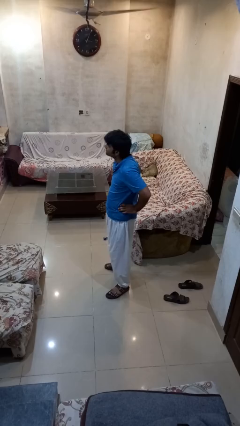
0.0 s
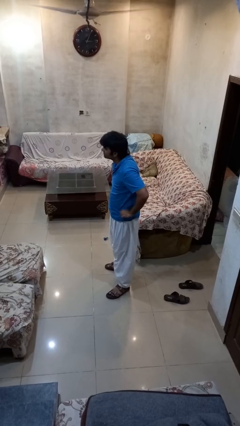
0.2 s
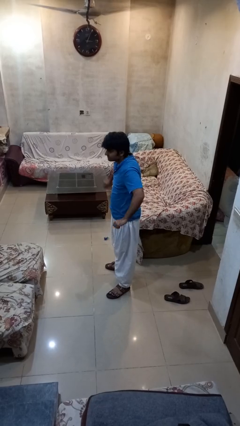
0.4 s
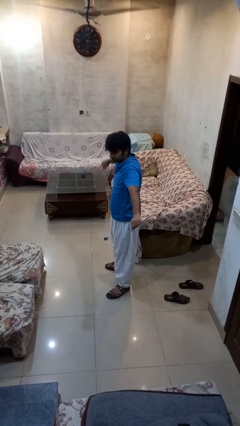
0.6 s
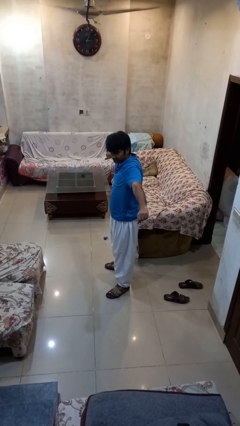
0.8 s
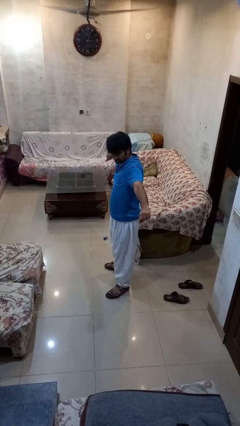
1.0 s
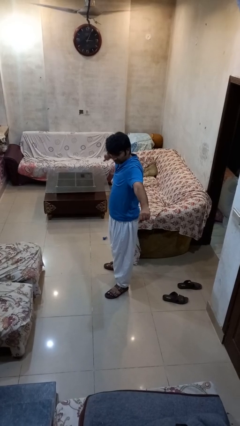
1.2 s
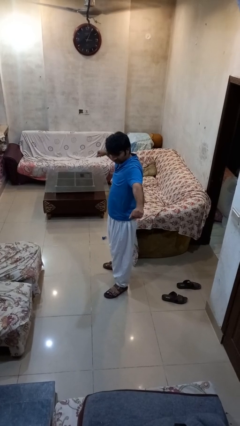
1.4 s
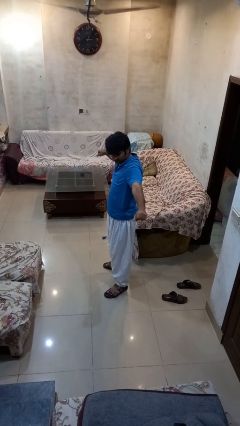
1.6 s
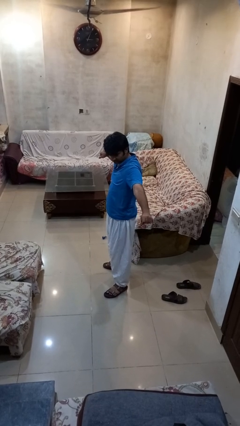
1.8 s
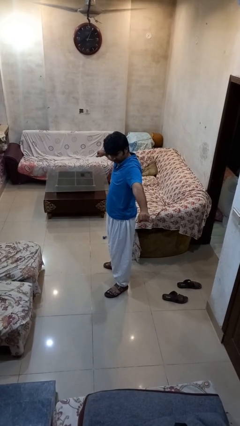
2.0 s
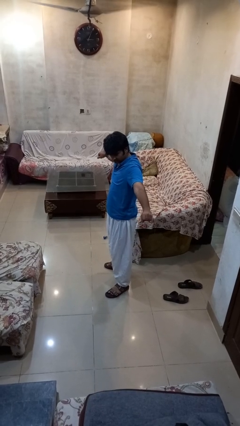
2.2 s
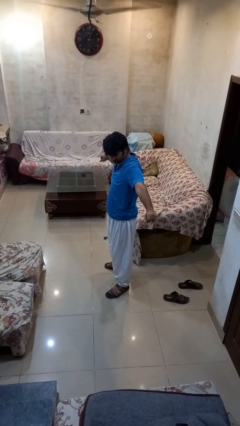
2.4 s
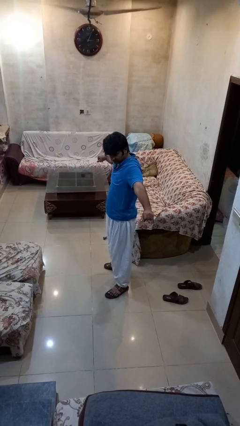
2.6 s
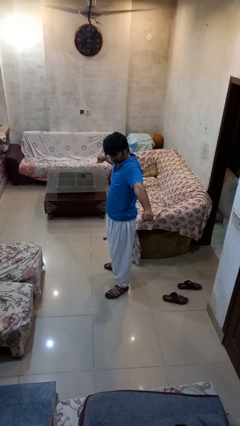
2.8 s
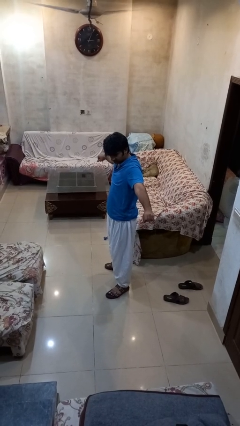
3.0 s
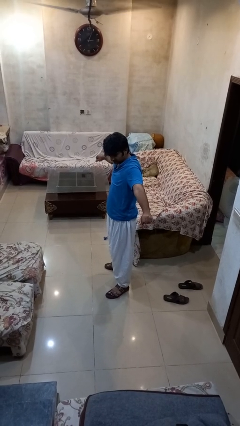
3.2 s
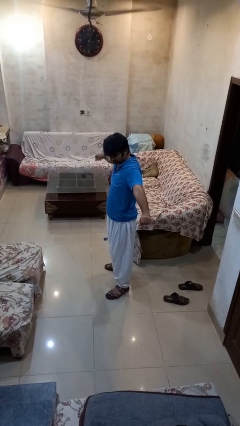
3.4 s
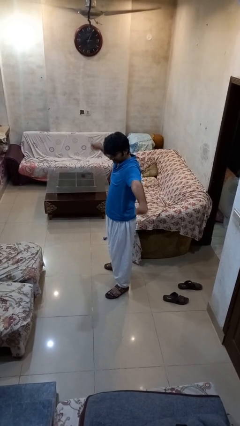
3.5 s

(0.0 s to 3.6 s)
person stretches arms to side

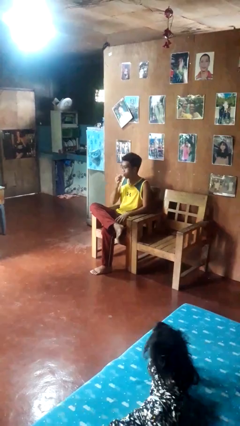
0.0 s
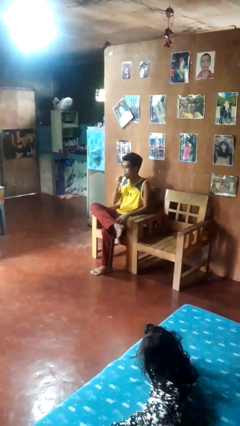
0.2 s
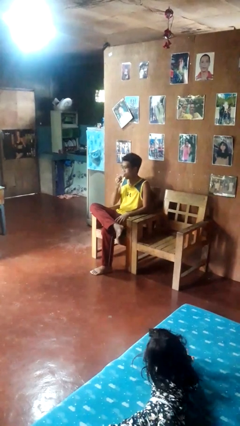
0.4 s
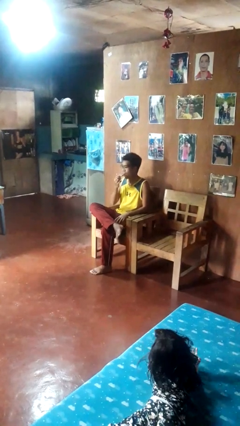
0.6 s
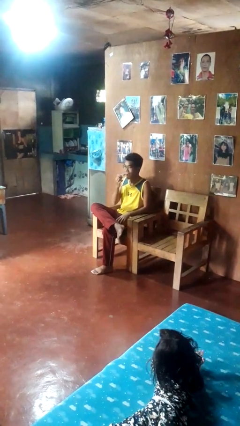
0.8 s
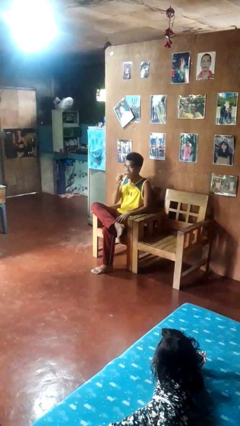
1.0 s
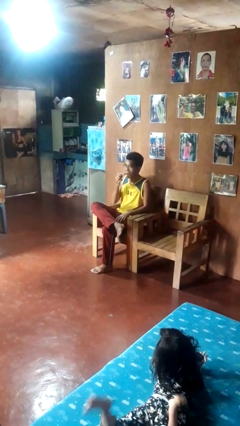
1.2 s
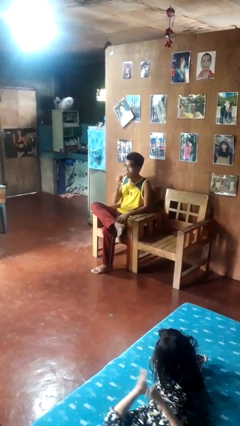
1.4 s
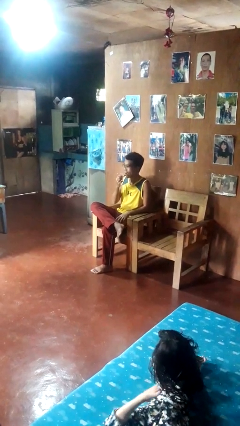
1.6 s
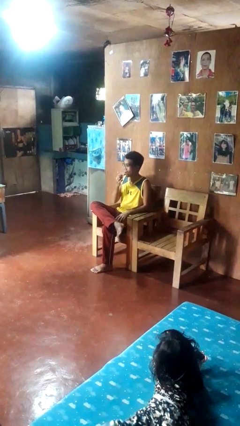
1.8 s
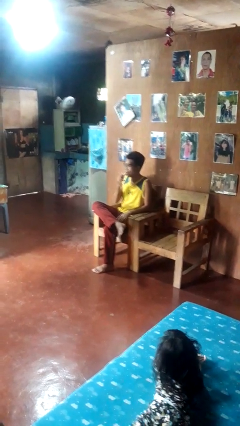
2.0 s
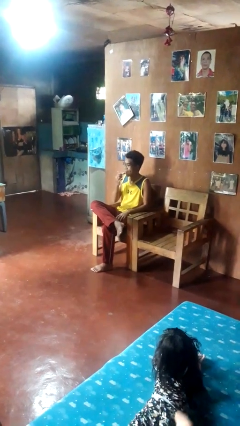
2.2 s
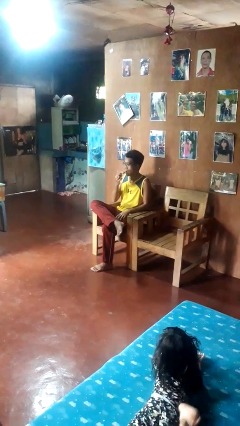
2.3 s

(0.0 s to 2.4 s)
person applies lip makeup

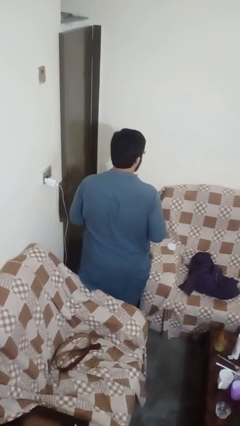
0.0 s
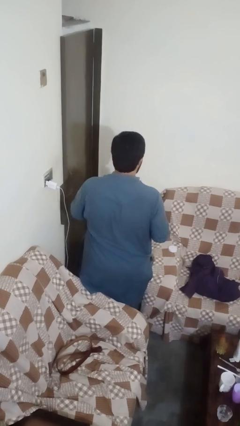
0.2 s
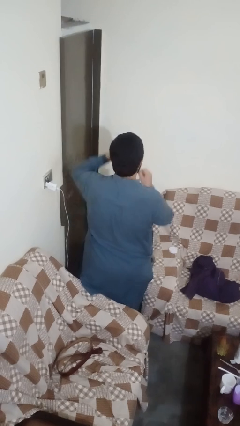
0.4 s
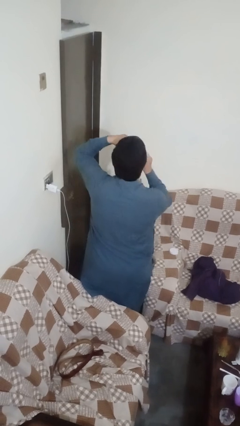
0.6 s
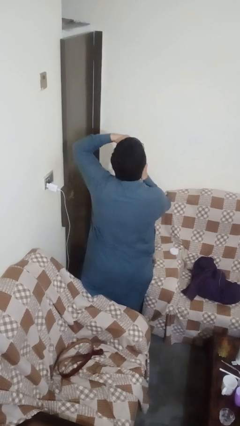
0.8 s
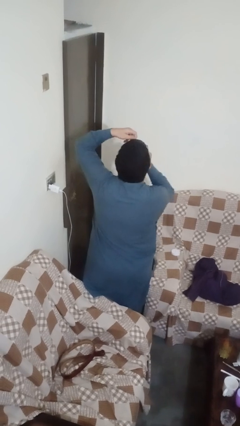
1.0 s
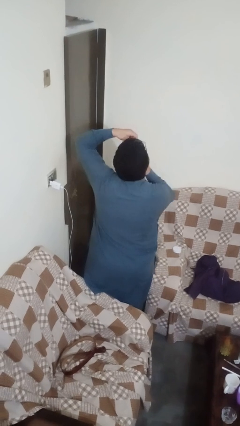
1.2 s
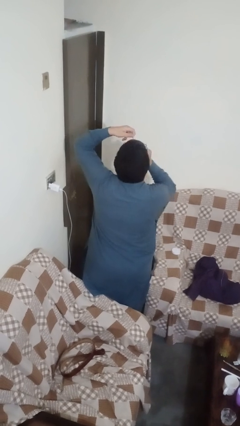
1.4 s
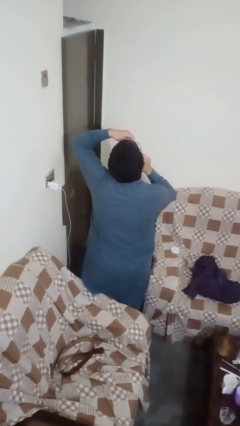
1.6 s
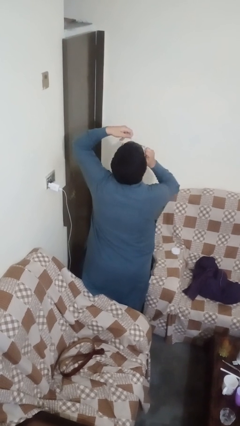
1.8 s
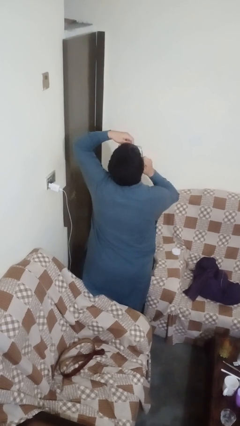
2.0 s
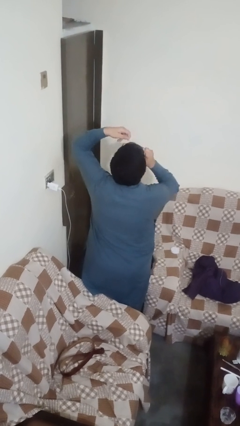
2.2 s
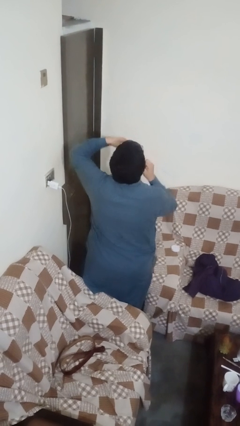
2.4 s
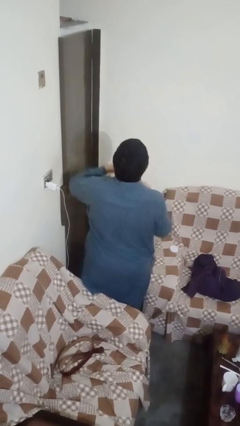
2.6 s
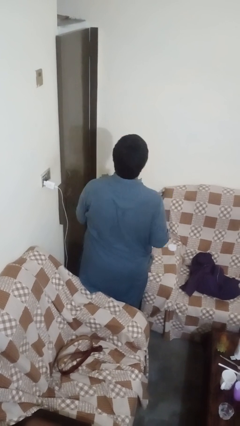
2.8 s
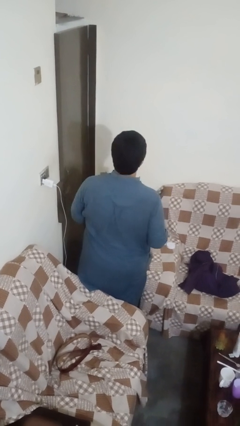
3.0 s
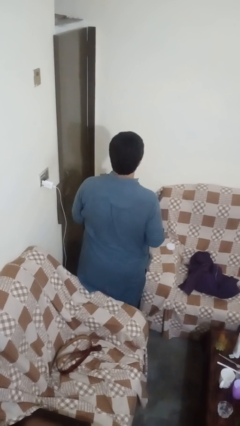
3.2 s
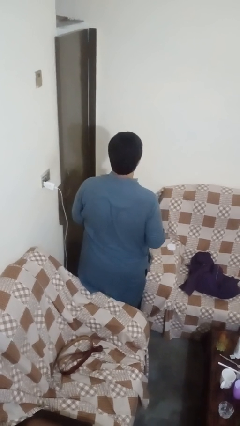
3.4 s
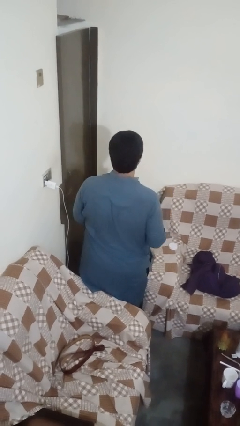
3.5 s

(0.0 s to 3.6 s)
person flosses

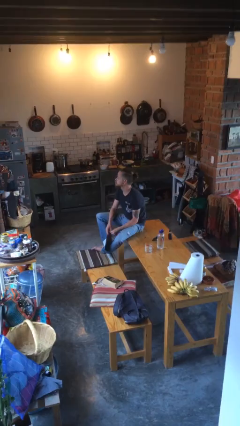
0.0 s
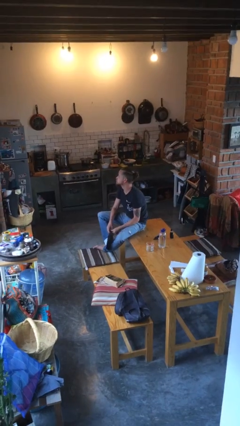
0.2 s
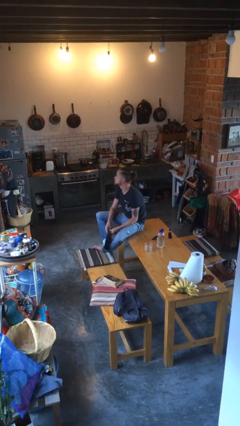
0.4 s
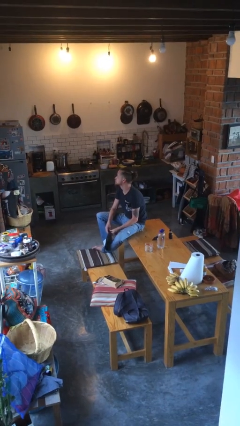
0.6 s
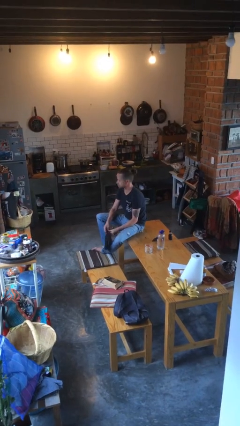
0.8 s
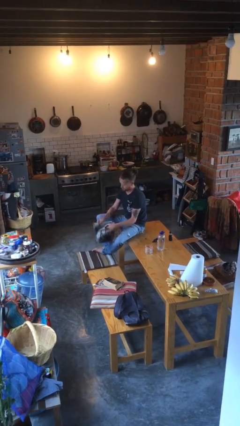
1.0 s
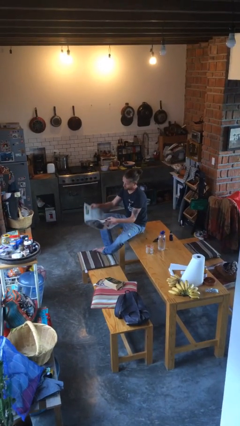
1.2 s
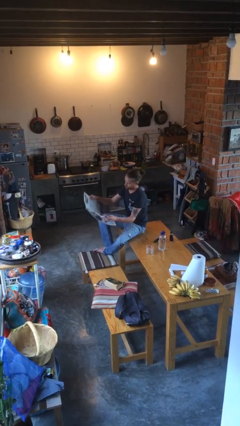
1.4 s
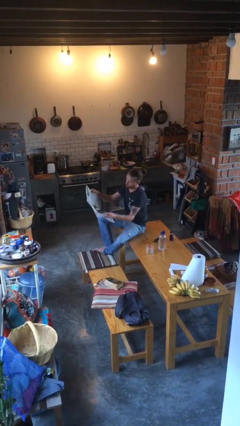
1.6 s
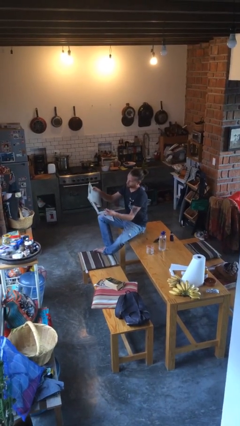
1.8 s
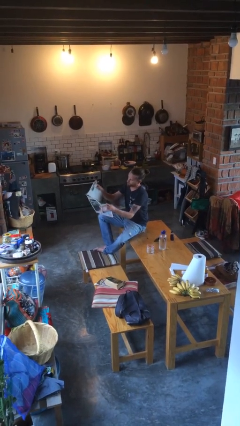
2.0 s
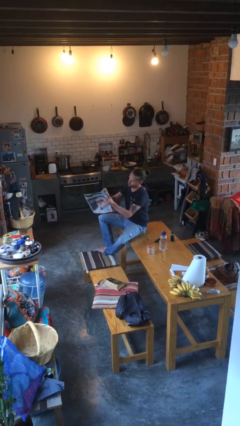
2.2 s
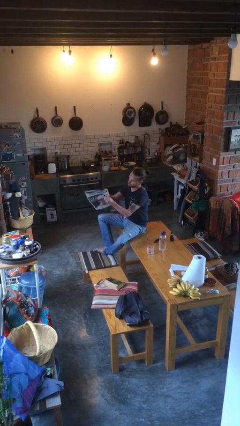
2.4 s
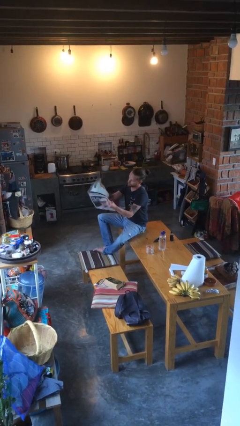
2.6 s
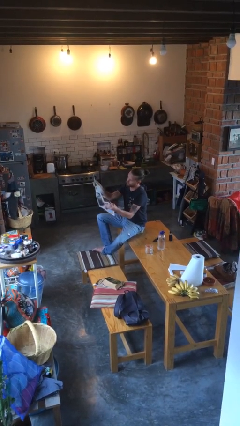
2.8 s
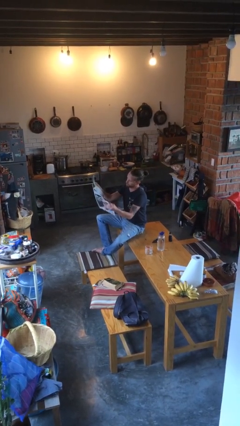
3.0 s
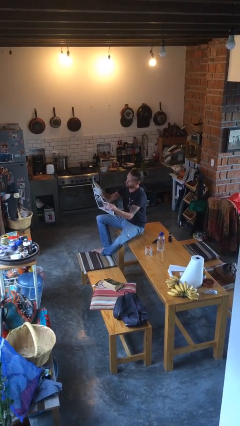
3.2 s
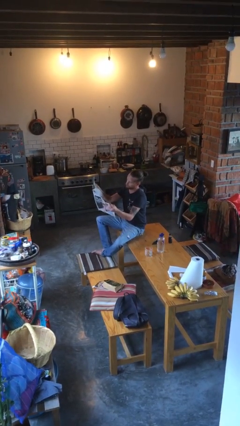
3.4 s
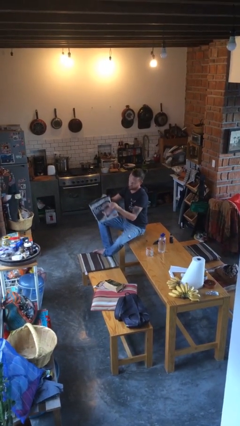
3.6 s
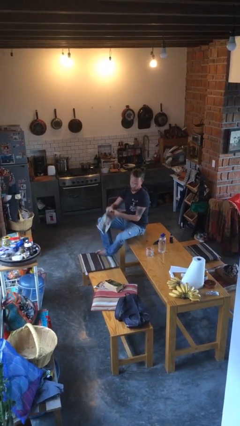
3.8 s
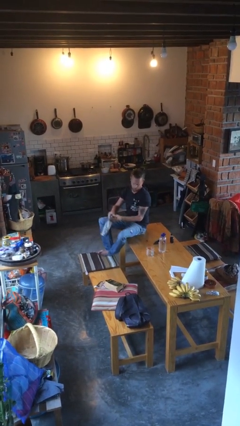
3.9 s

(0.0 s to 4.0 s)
person reads newspaper

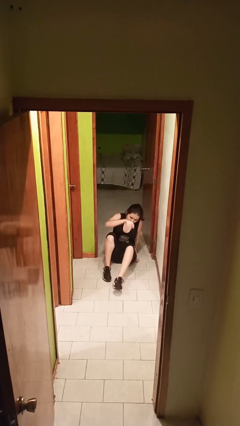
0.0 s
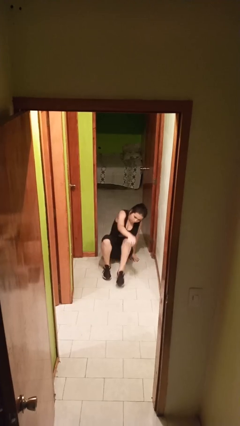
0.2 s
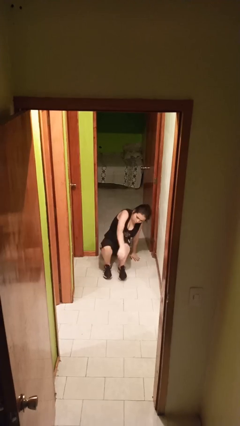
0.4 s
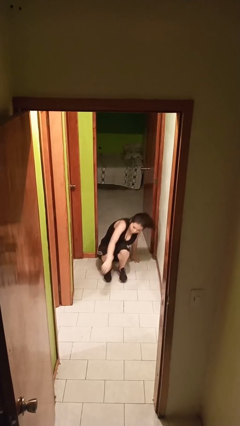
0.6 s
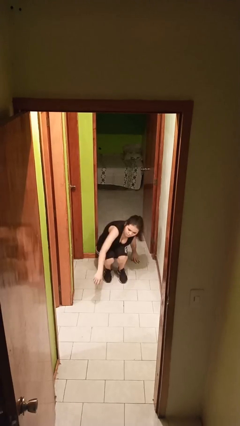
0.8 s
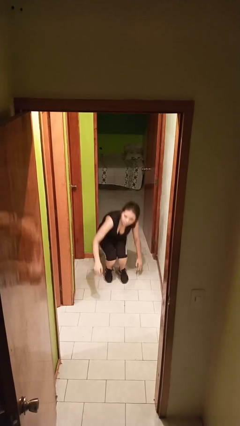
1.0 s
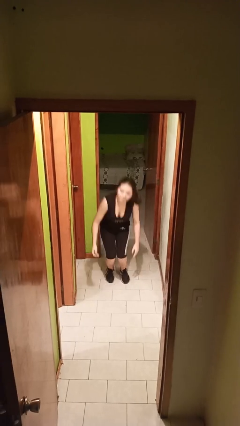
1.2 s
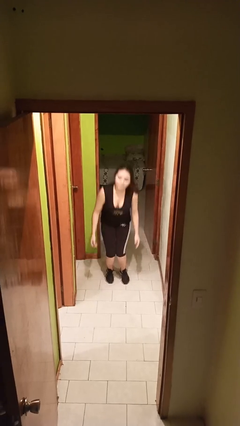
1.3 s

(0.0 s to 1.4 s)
person stands up

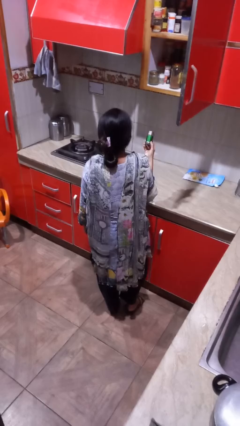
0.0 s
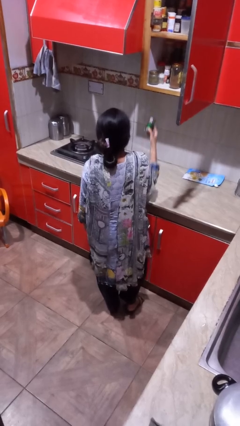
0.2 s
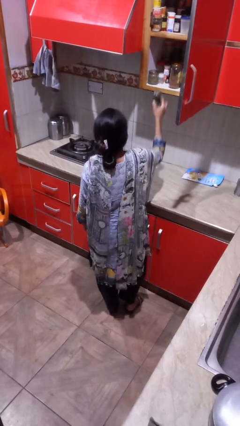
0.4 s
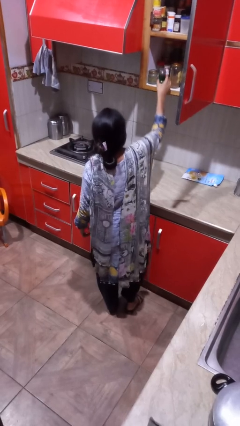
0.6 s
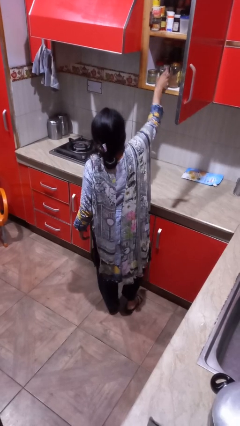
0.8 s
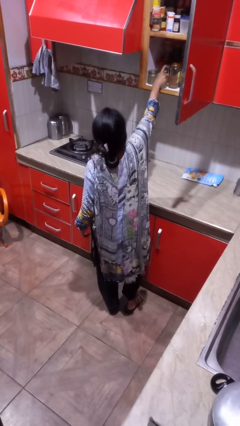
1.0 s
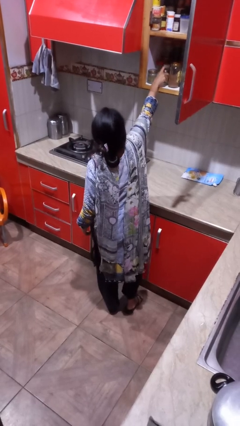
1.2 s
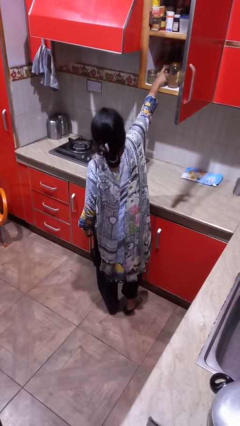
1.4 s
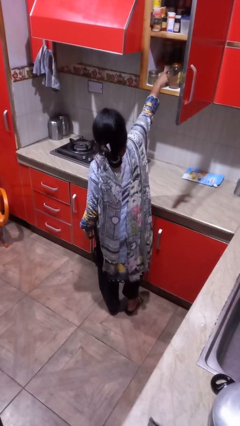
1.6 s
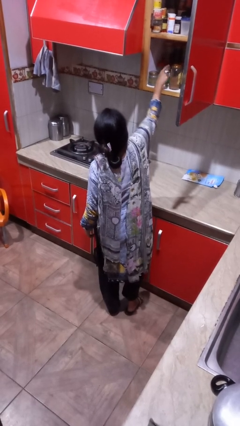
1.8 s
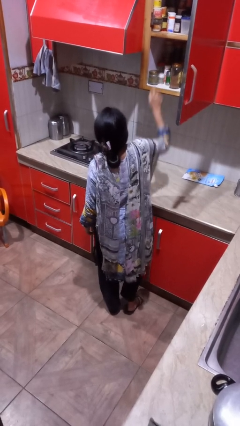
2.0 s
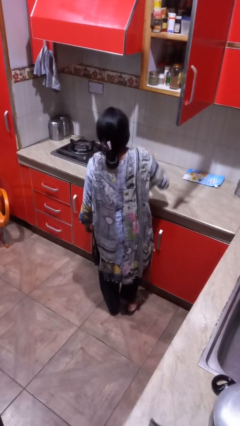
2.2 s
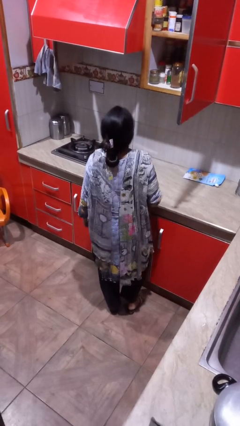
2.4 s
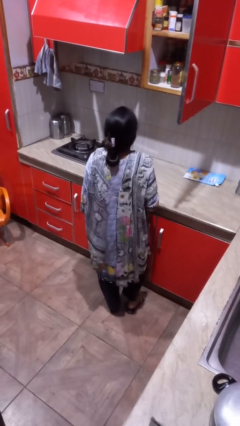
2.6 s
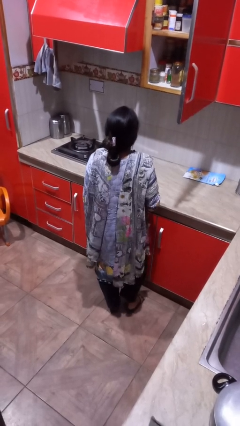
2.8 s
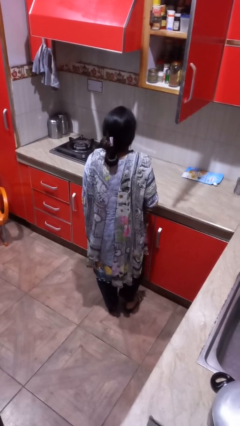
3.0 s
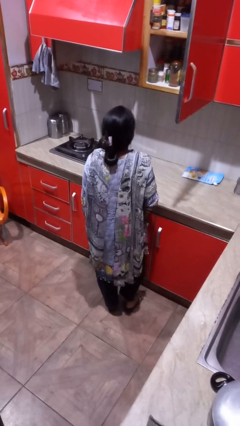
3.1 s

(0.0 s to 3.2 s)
person puts object in cabinet
